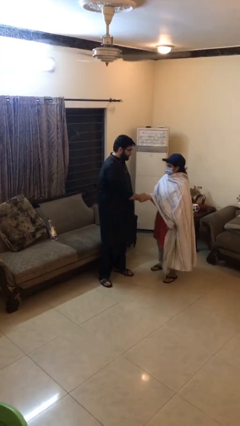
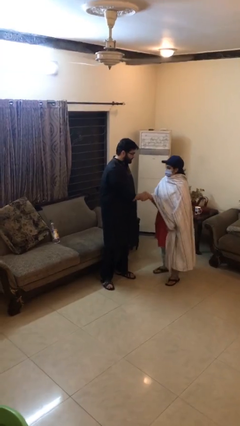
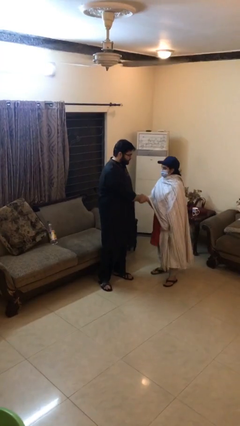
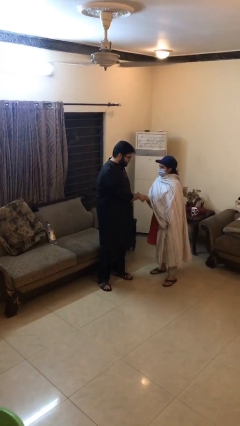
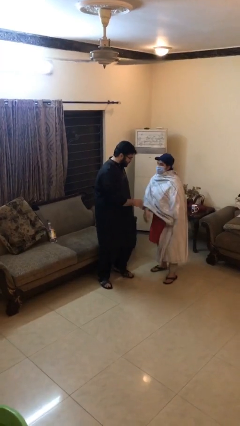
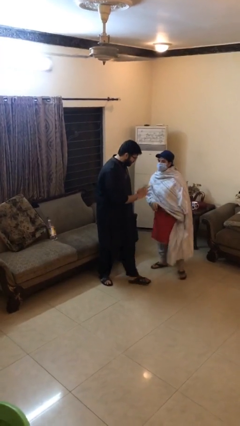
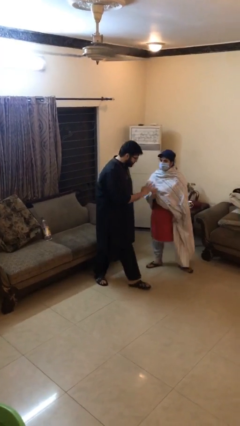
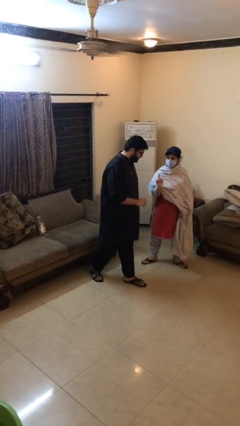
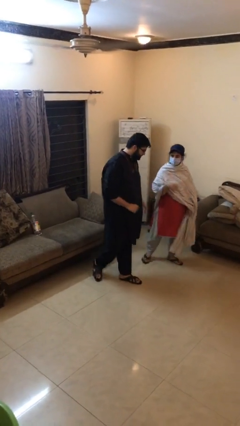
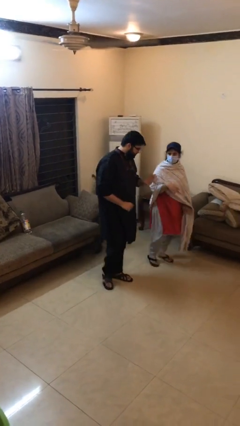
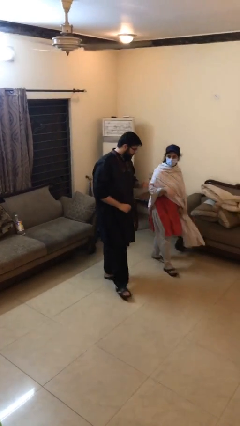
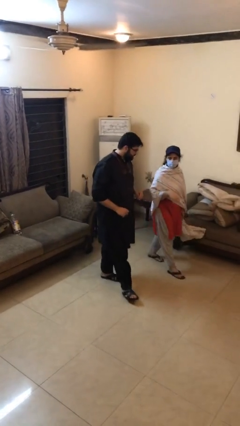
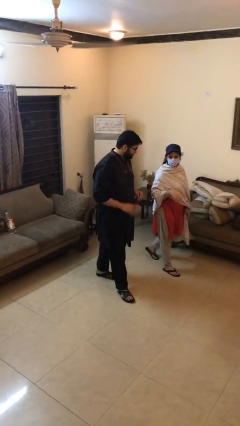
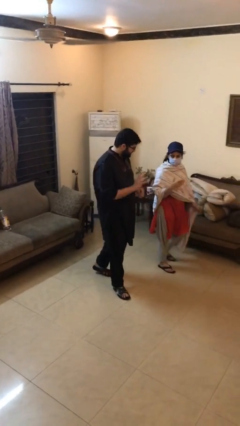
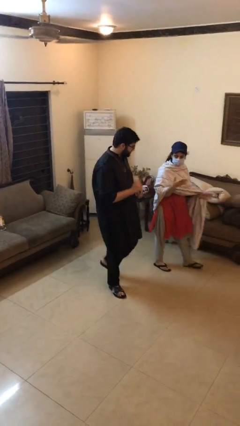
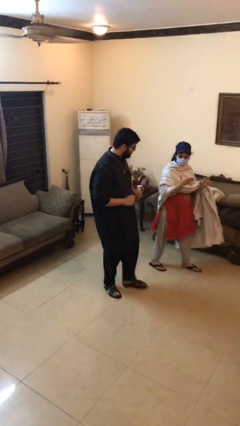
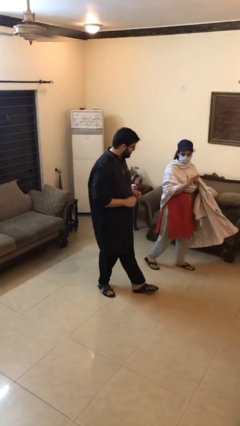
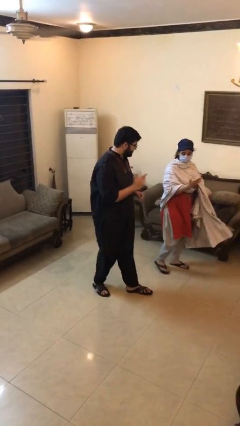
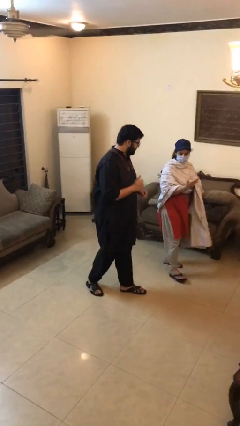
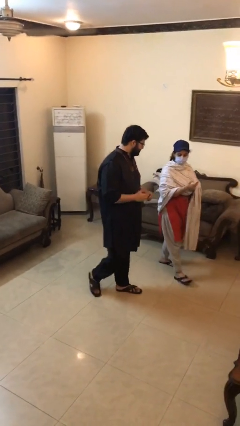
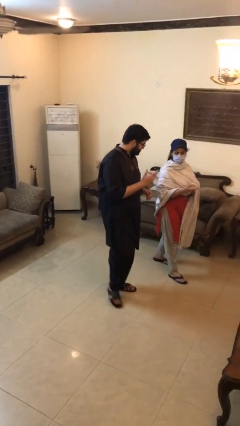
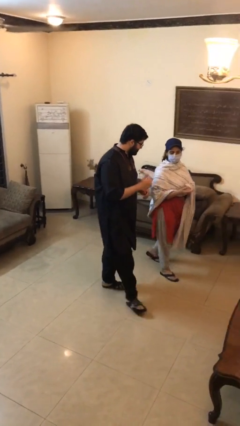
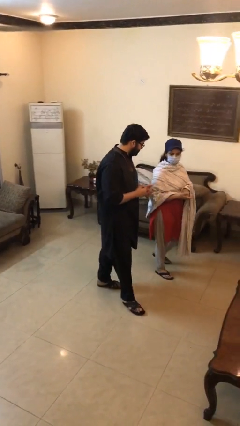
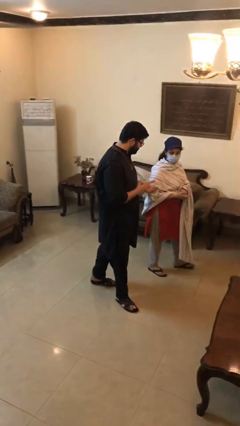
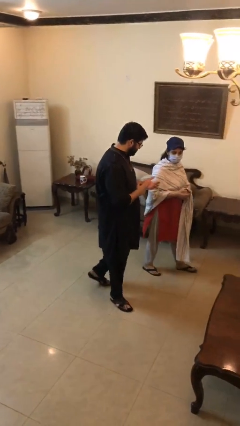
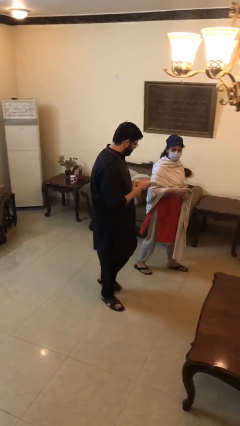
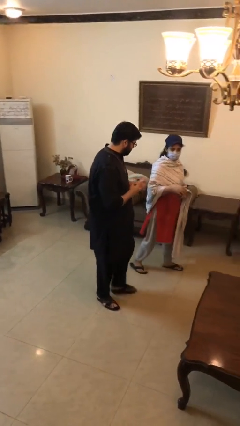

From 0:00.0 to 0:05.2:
person talks to person

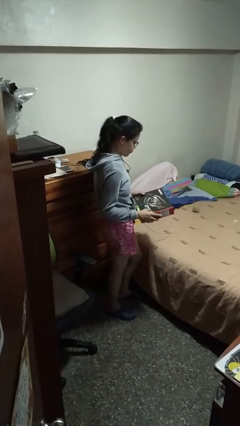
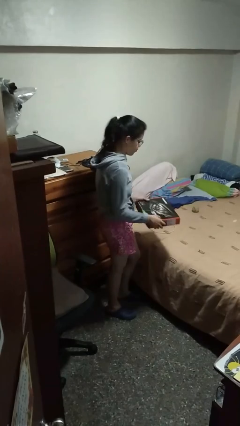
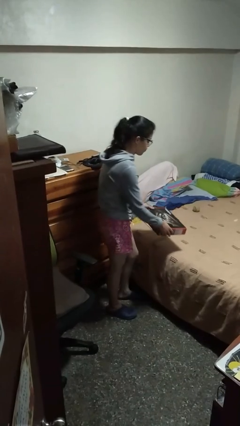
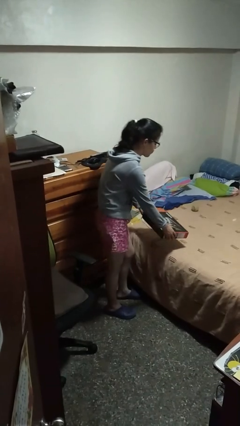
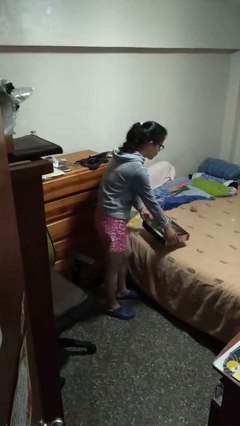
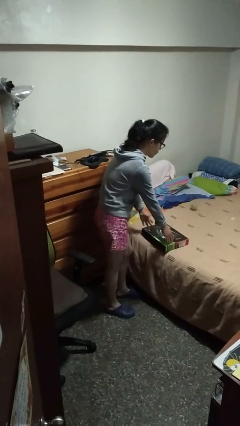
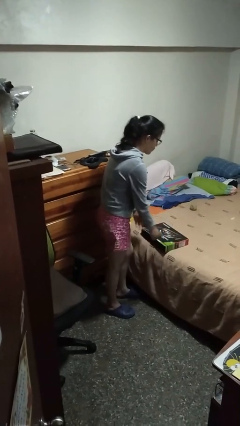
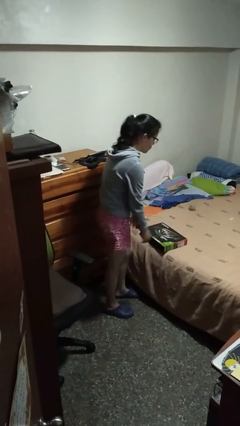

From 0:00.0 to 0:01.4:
person puts down object on bed

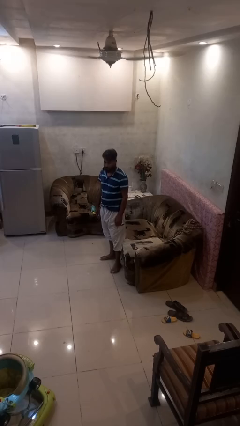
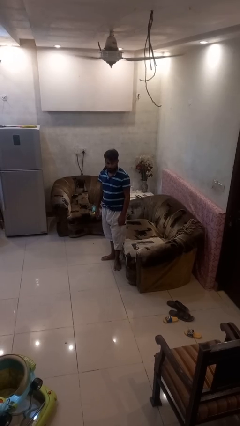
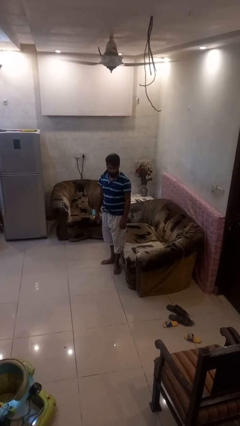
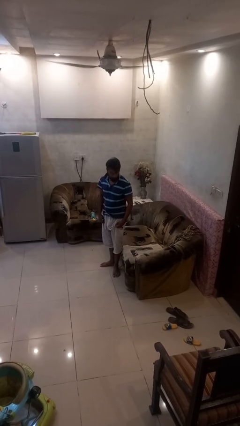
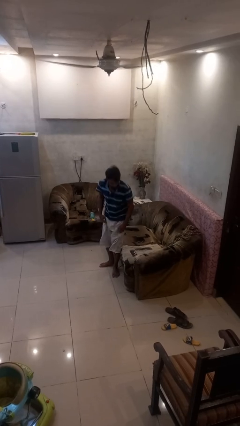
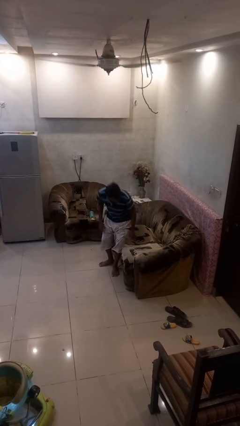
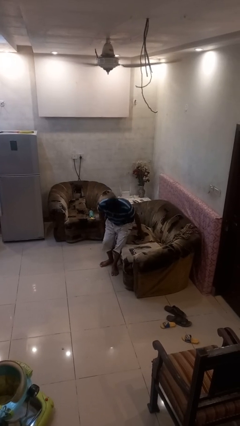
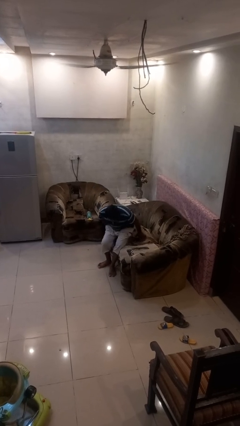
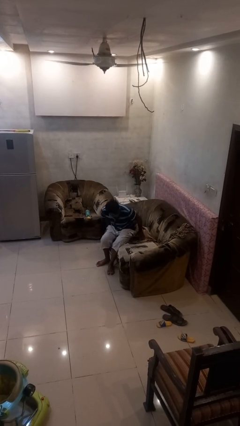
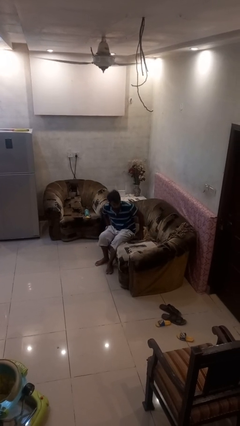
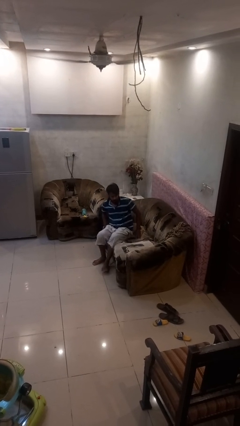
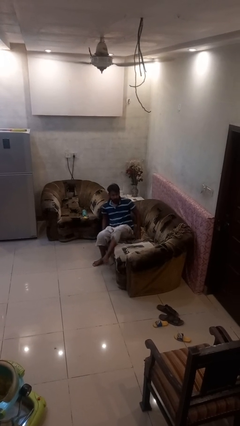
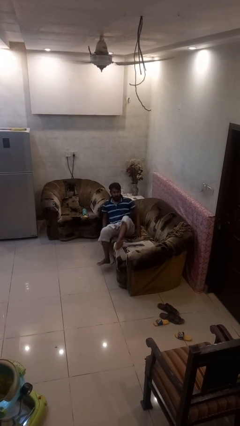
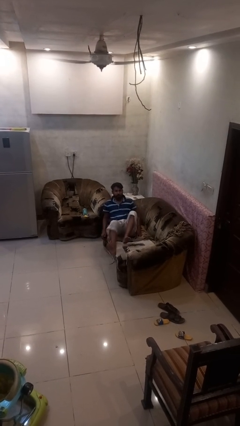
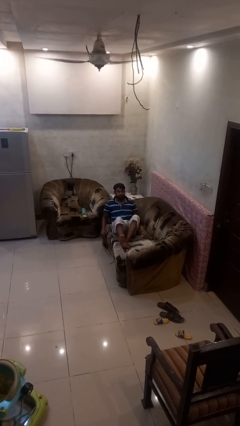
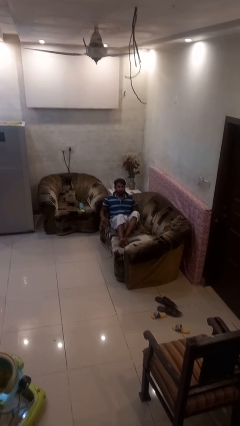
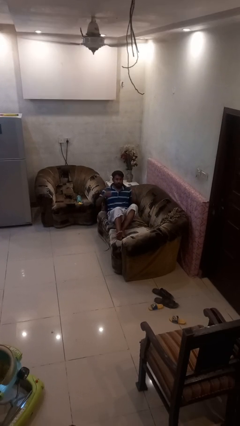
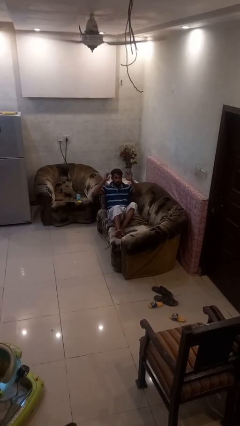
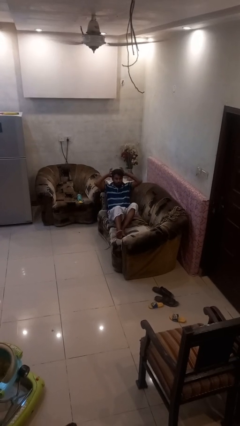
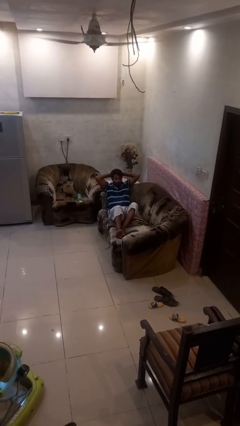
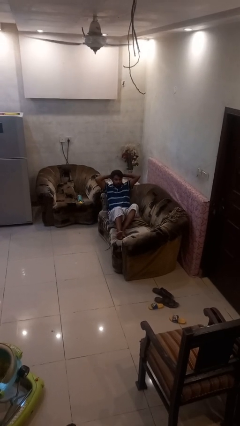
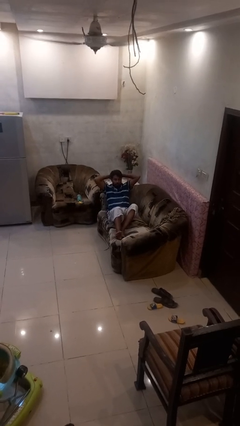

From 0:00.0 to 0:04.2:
person lies down on couch

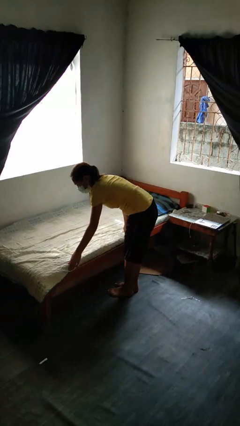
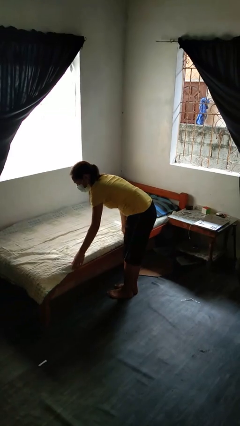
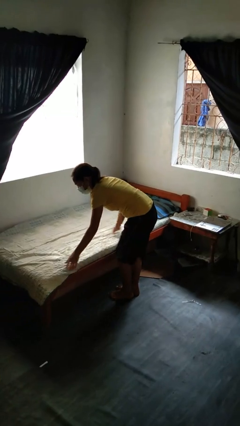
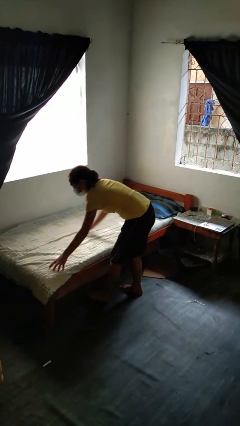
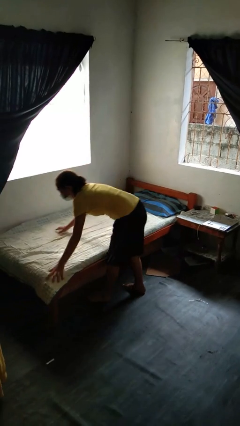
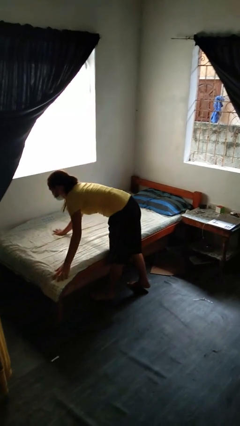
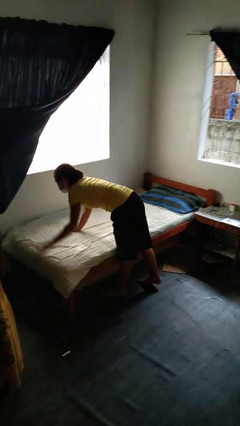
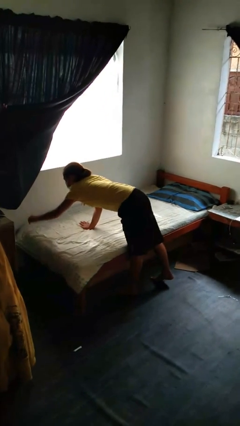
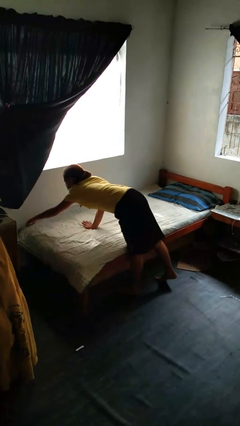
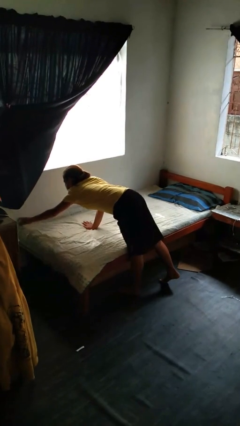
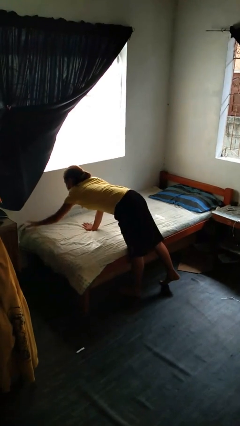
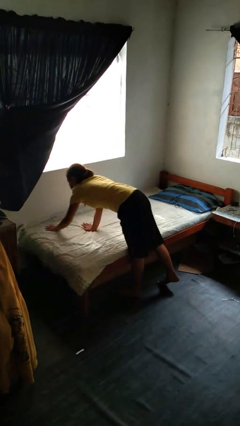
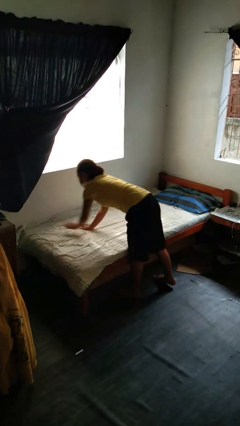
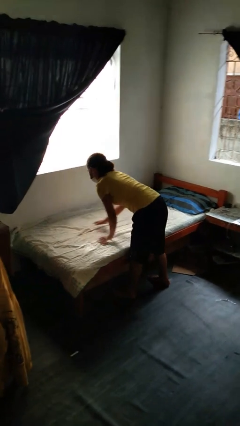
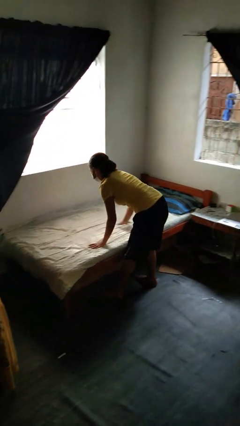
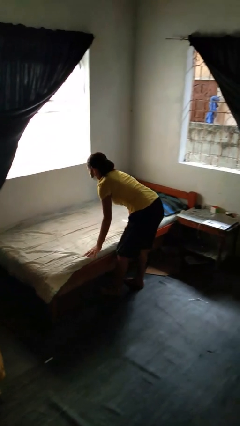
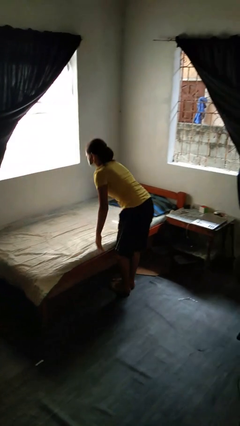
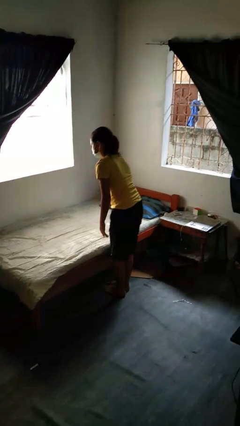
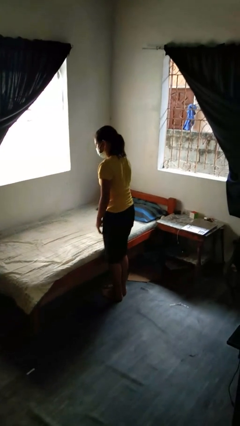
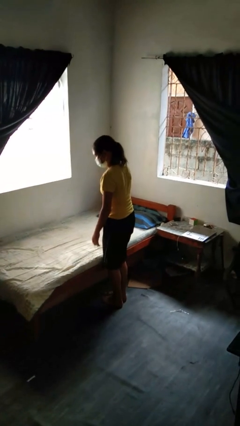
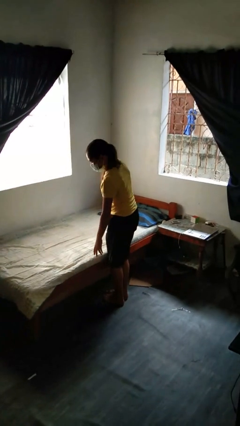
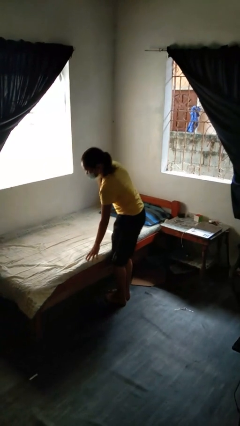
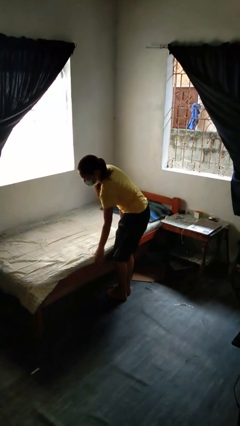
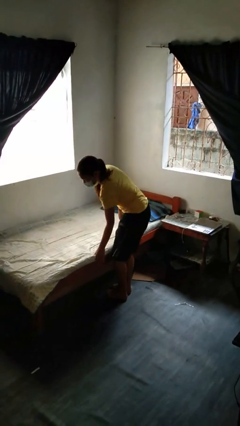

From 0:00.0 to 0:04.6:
person makes bed

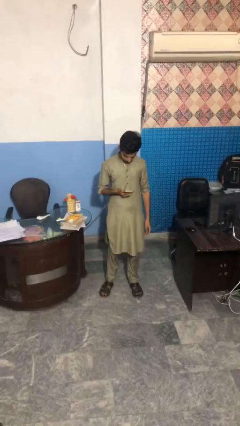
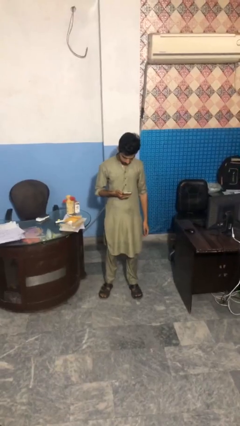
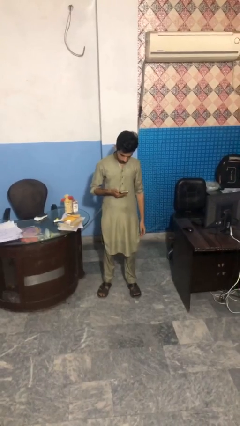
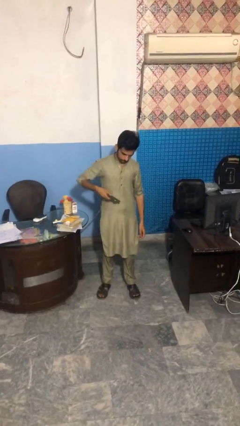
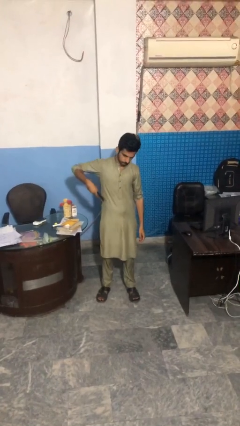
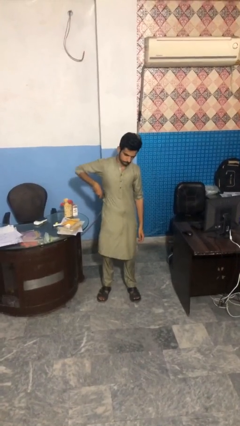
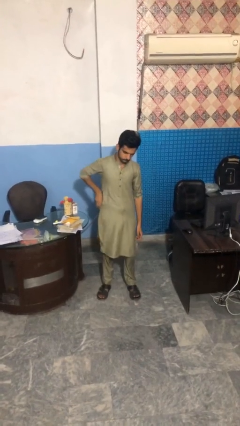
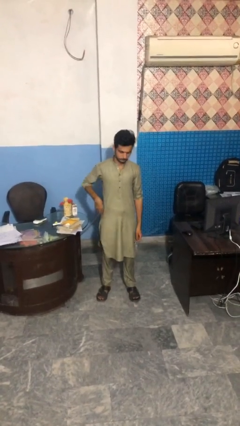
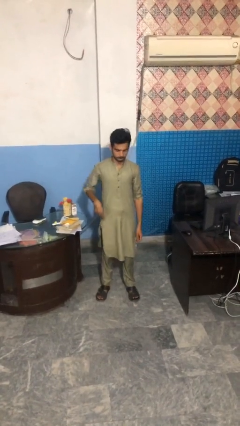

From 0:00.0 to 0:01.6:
person puts phone into pocket

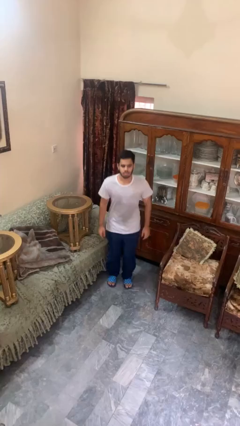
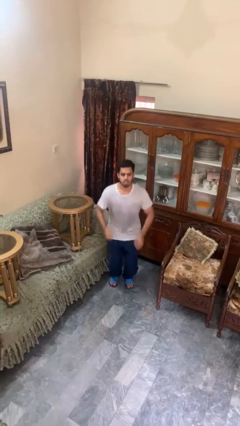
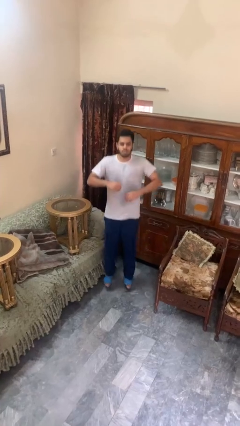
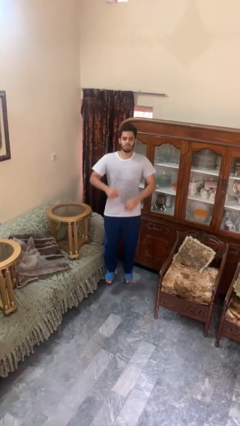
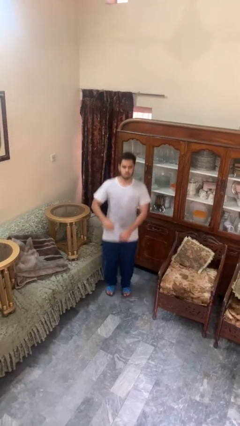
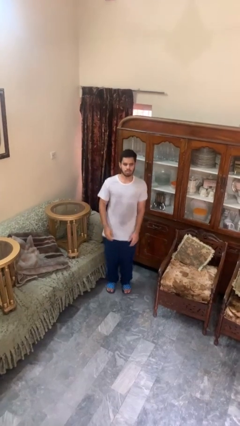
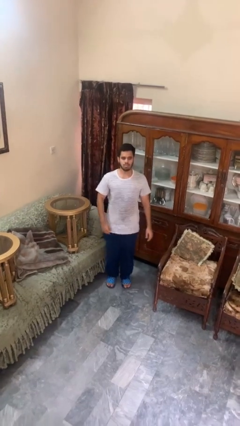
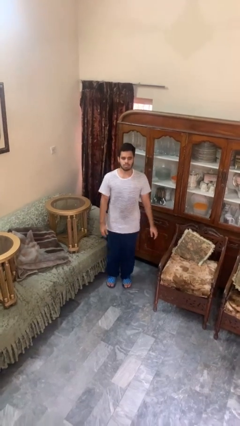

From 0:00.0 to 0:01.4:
person jumps
